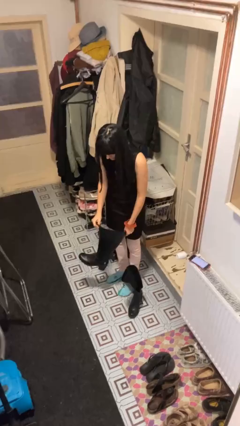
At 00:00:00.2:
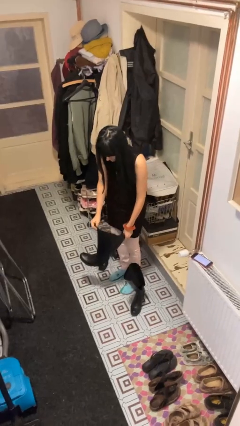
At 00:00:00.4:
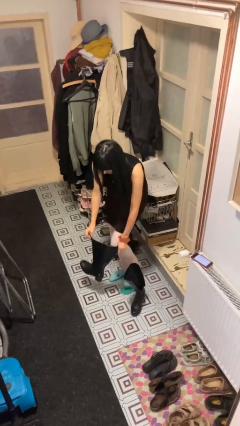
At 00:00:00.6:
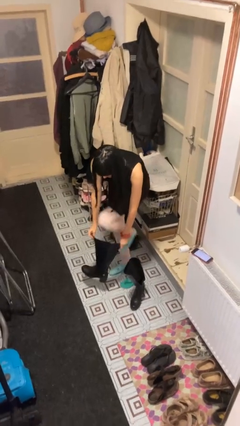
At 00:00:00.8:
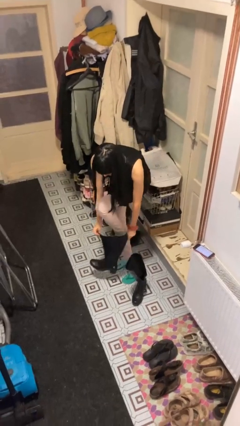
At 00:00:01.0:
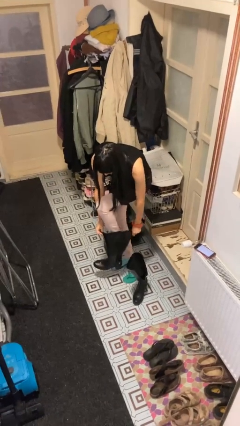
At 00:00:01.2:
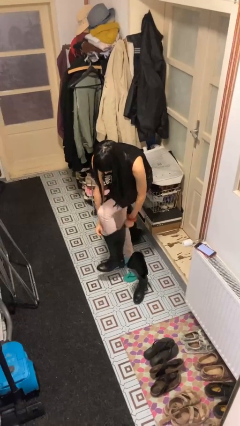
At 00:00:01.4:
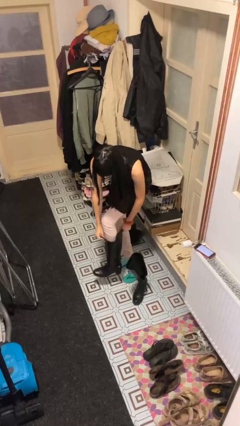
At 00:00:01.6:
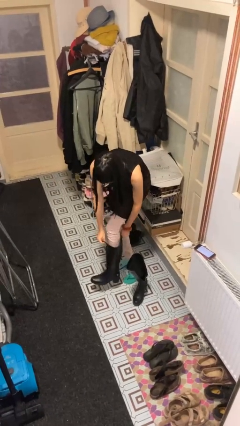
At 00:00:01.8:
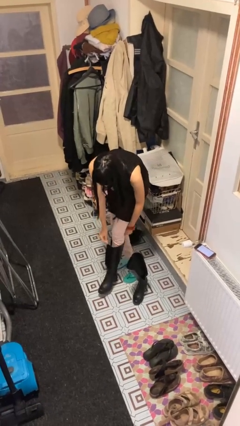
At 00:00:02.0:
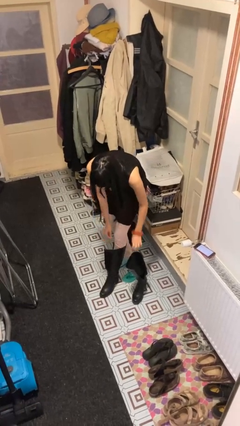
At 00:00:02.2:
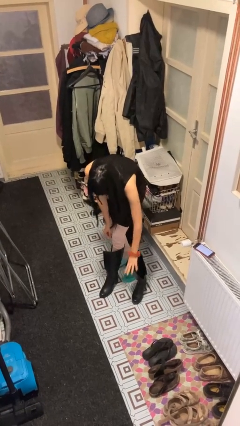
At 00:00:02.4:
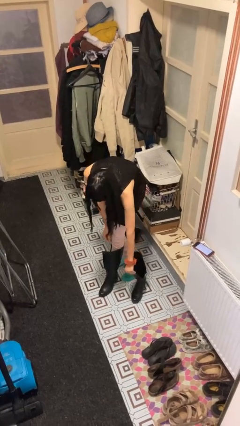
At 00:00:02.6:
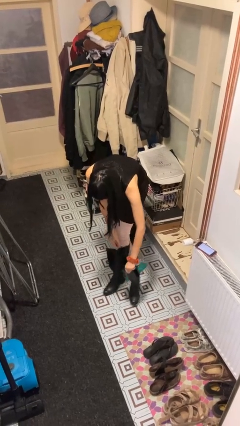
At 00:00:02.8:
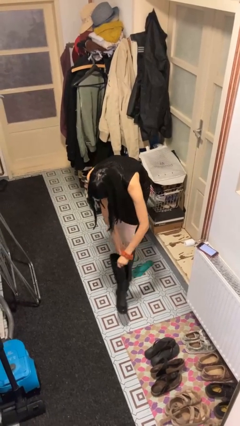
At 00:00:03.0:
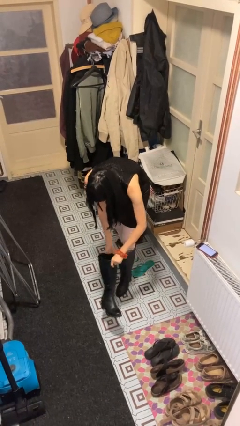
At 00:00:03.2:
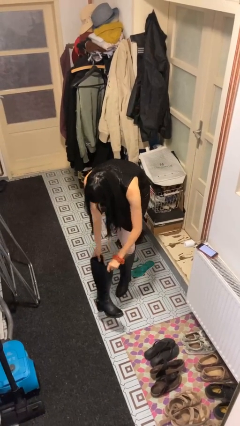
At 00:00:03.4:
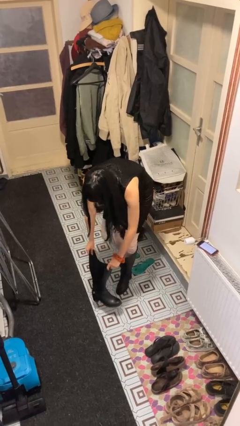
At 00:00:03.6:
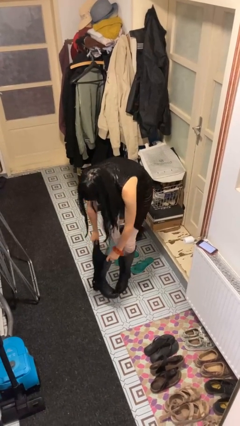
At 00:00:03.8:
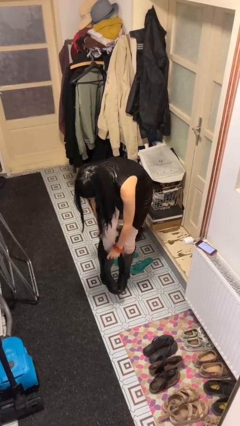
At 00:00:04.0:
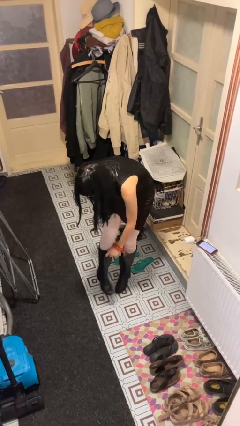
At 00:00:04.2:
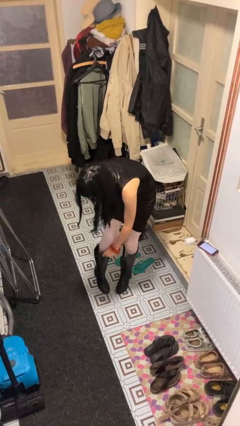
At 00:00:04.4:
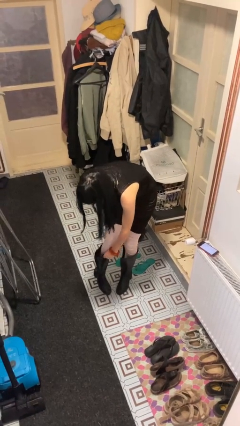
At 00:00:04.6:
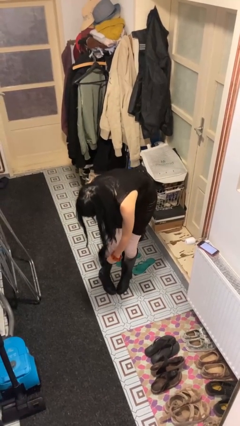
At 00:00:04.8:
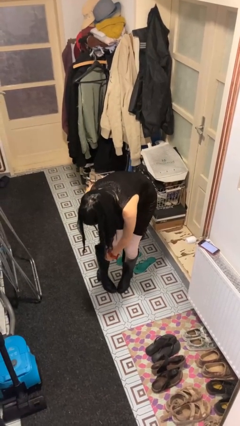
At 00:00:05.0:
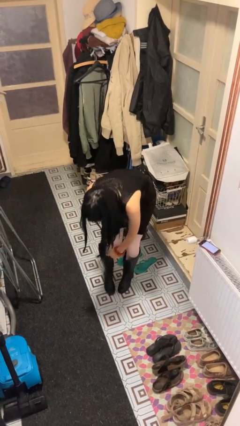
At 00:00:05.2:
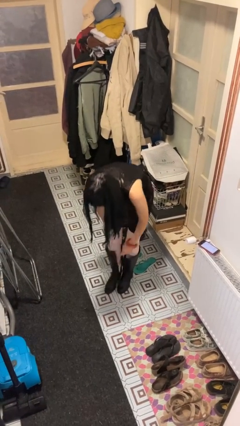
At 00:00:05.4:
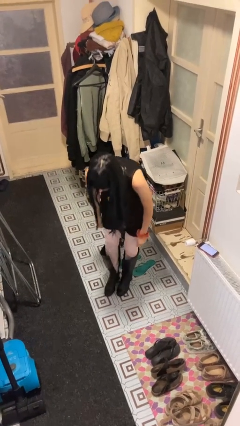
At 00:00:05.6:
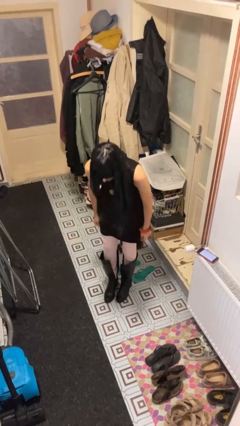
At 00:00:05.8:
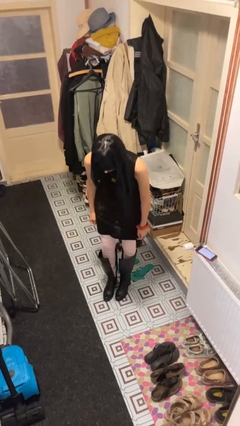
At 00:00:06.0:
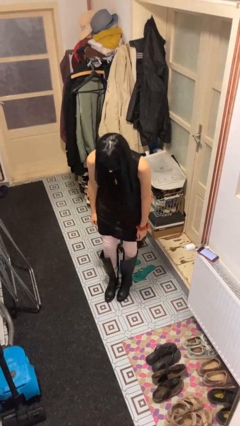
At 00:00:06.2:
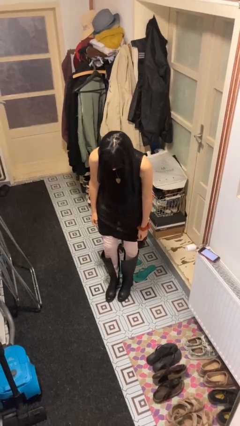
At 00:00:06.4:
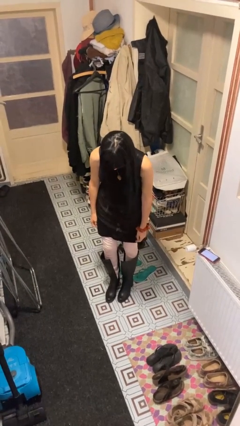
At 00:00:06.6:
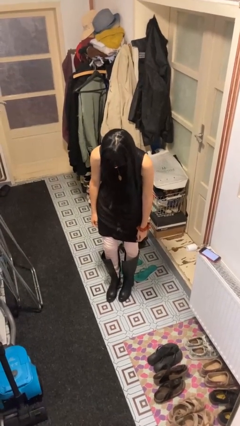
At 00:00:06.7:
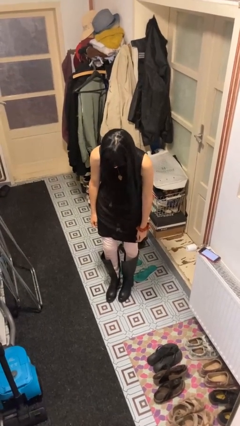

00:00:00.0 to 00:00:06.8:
person puts on boots

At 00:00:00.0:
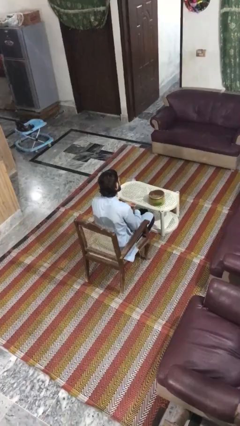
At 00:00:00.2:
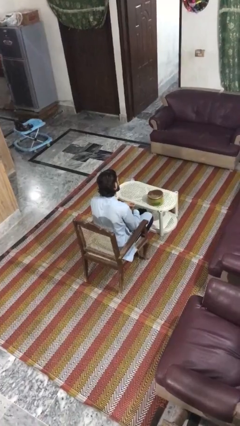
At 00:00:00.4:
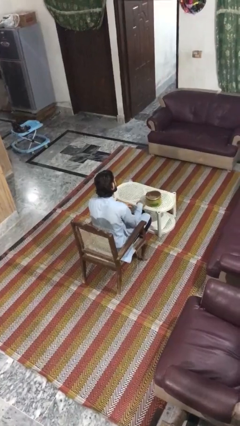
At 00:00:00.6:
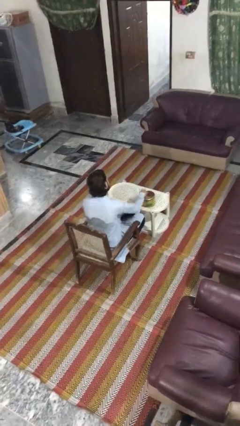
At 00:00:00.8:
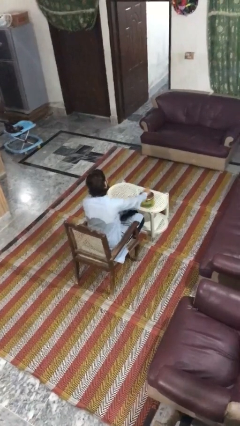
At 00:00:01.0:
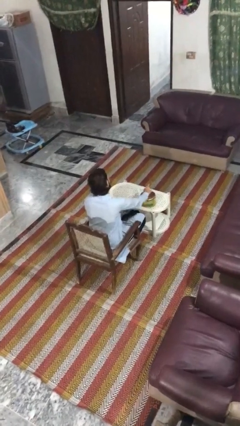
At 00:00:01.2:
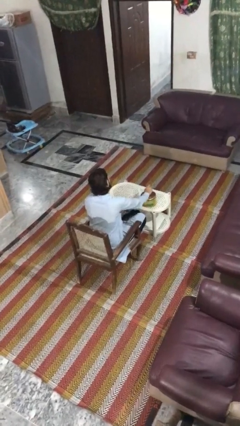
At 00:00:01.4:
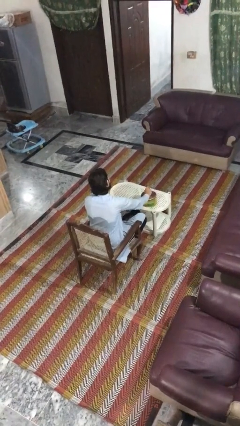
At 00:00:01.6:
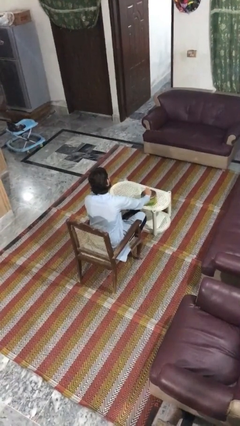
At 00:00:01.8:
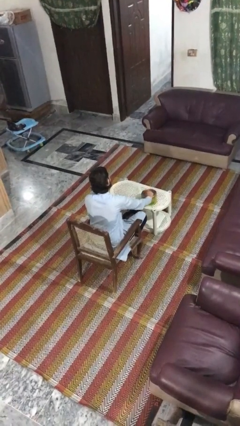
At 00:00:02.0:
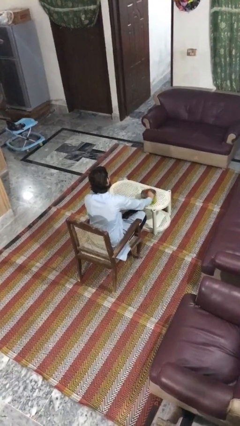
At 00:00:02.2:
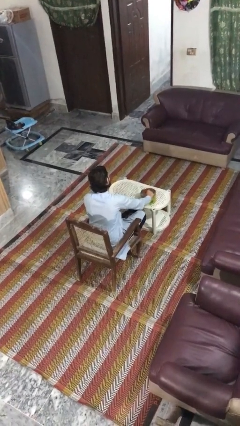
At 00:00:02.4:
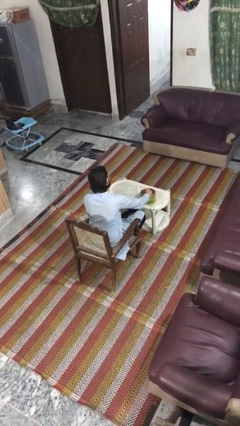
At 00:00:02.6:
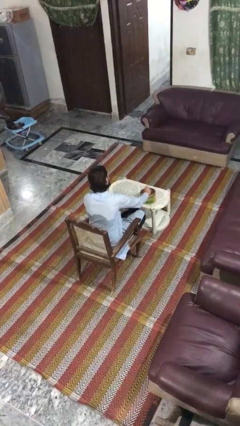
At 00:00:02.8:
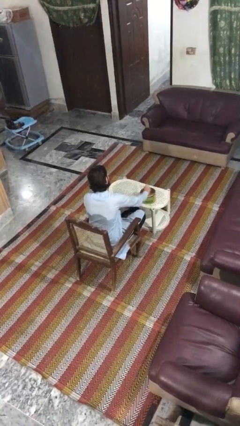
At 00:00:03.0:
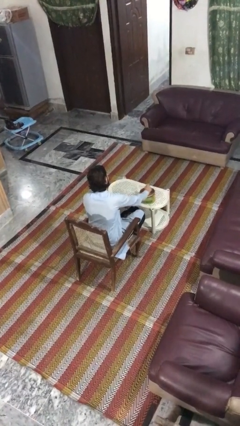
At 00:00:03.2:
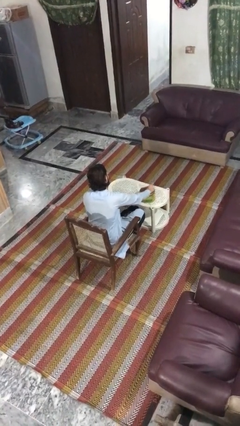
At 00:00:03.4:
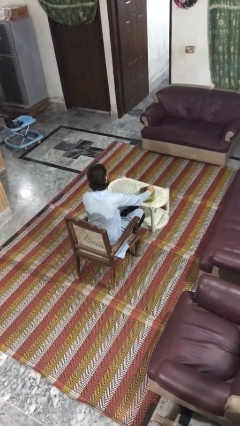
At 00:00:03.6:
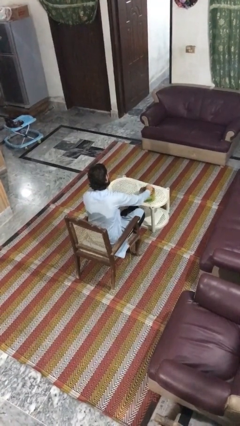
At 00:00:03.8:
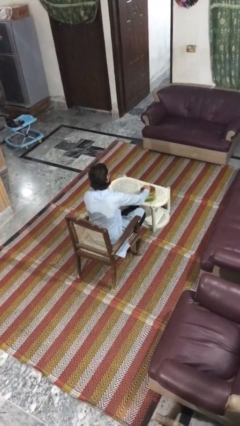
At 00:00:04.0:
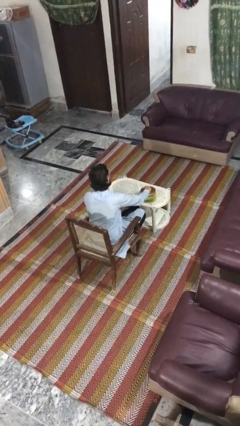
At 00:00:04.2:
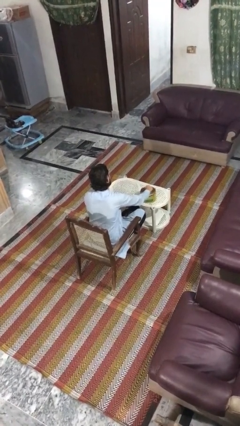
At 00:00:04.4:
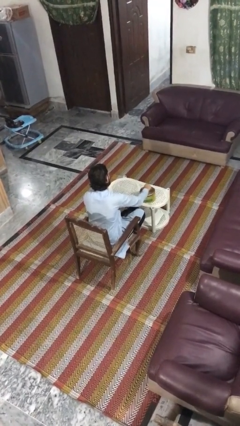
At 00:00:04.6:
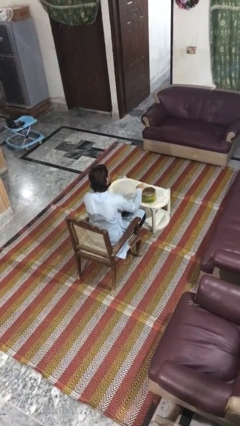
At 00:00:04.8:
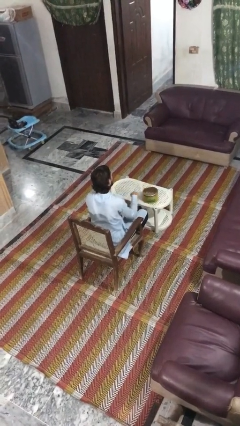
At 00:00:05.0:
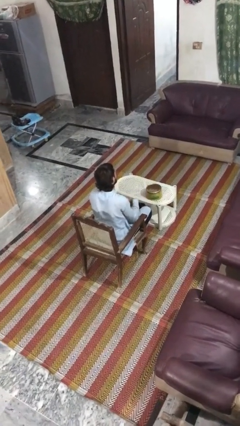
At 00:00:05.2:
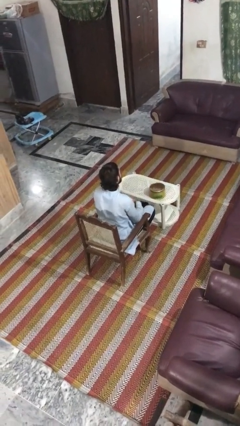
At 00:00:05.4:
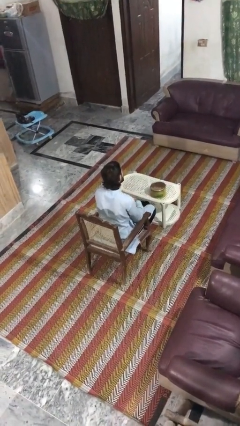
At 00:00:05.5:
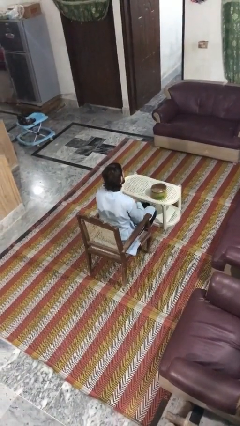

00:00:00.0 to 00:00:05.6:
person taps object with finger

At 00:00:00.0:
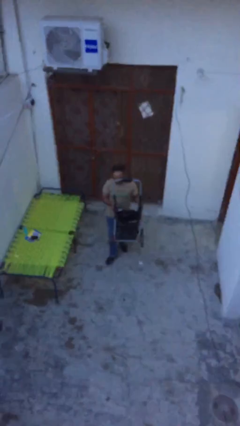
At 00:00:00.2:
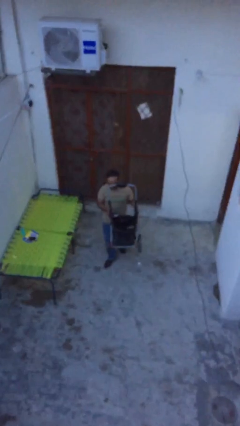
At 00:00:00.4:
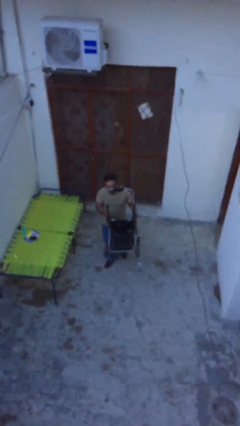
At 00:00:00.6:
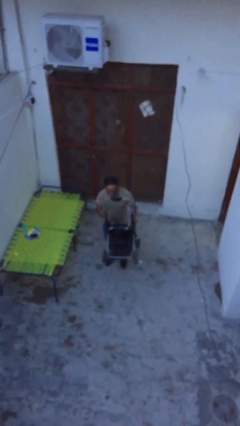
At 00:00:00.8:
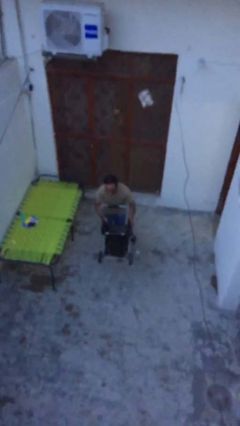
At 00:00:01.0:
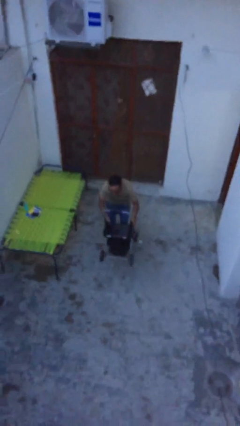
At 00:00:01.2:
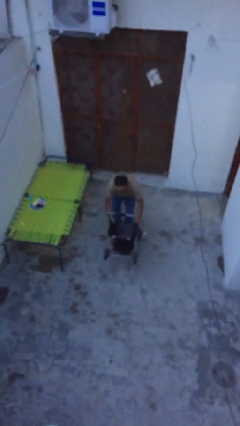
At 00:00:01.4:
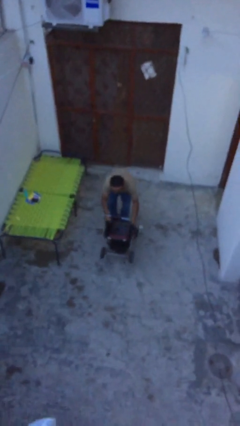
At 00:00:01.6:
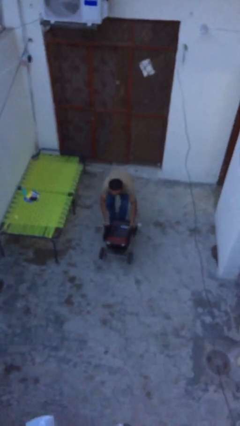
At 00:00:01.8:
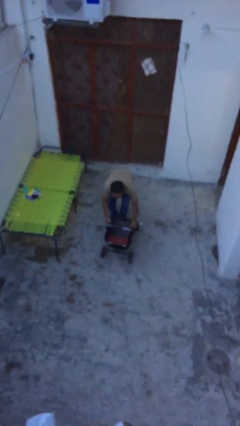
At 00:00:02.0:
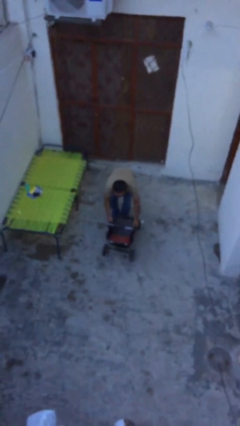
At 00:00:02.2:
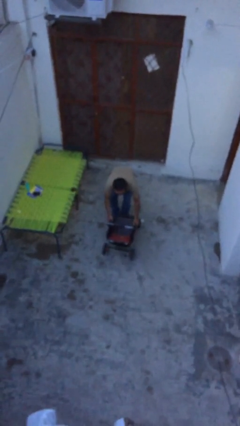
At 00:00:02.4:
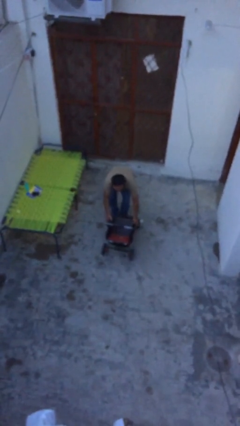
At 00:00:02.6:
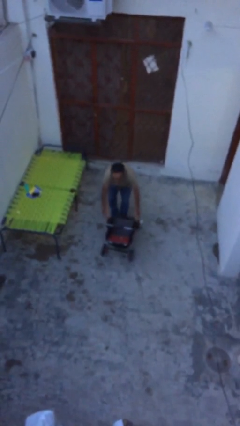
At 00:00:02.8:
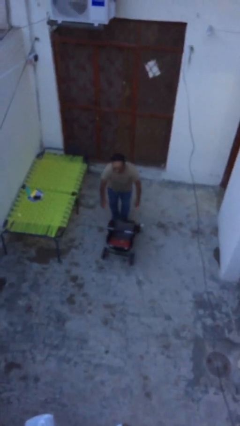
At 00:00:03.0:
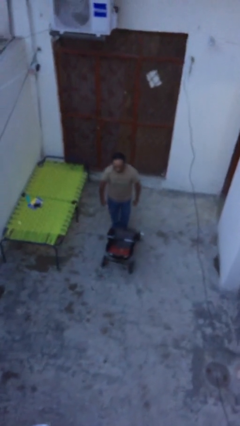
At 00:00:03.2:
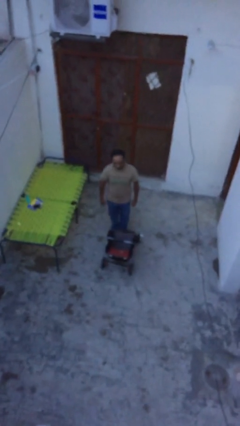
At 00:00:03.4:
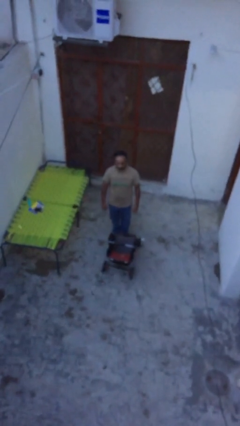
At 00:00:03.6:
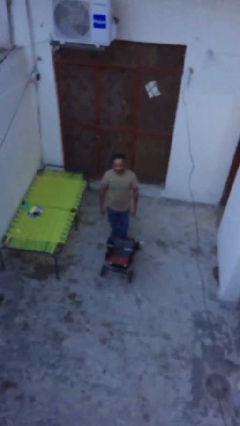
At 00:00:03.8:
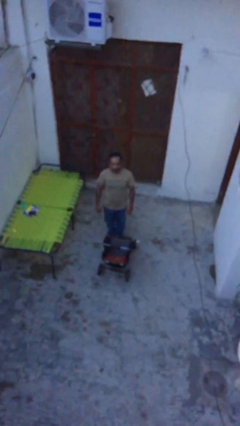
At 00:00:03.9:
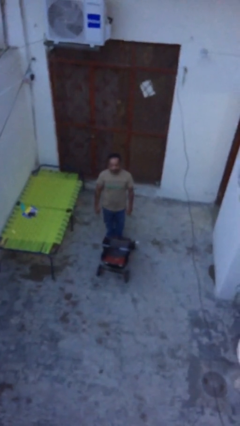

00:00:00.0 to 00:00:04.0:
person puts down object on floor

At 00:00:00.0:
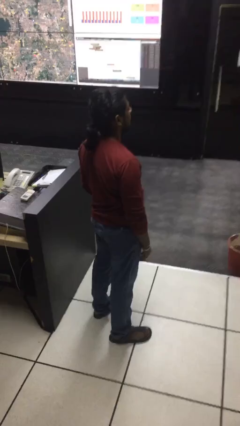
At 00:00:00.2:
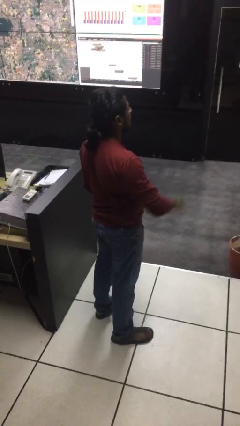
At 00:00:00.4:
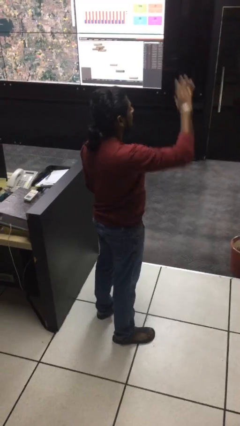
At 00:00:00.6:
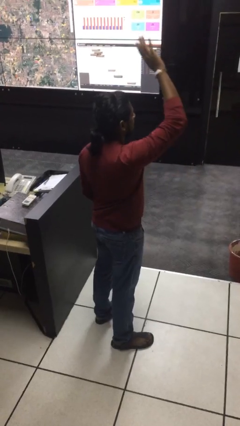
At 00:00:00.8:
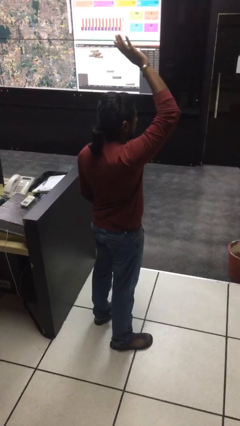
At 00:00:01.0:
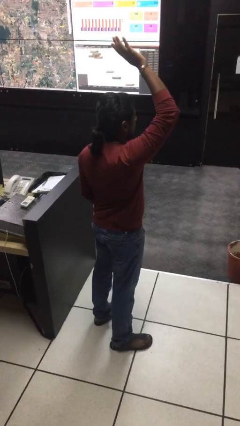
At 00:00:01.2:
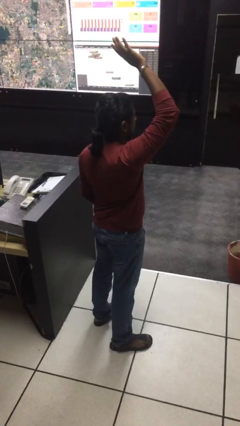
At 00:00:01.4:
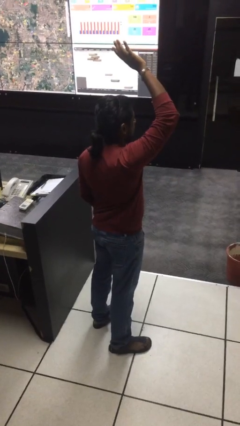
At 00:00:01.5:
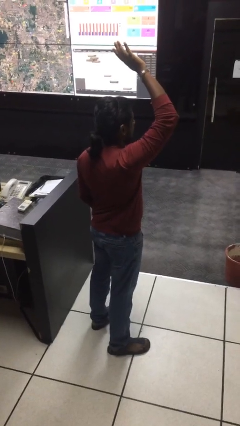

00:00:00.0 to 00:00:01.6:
person gestures raise hand
